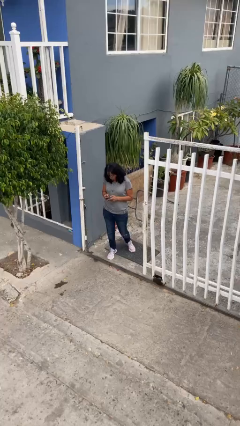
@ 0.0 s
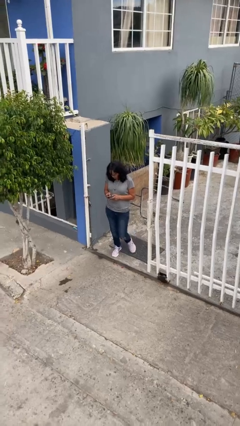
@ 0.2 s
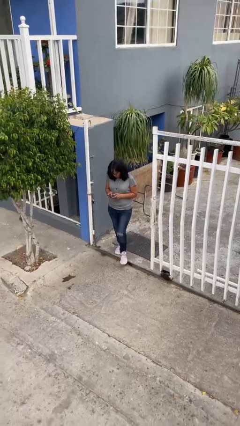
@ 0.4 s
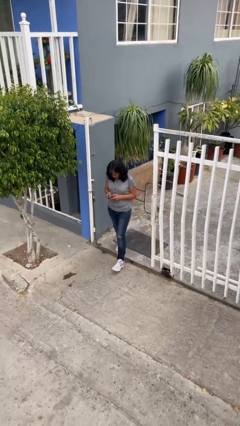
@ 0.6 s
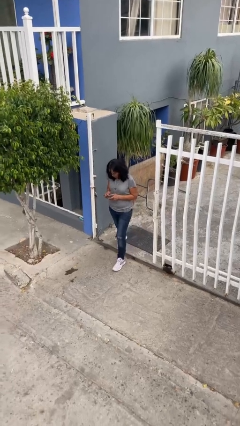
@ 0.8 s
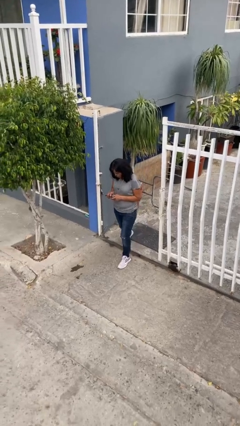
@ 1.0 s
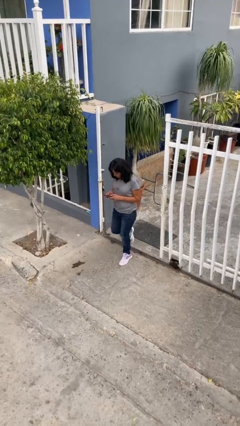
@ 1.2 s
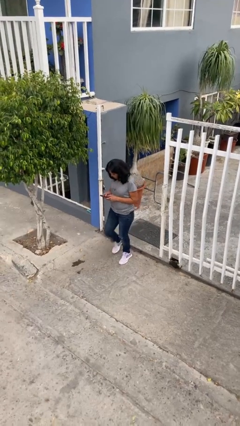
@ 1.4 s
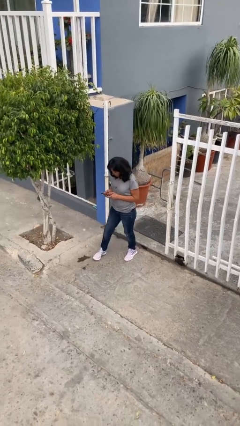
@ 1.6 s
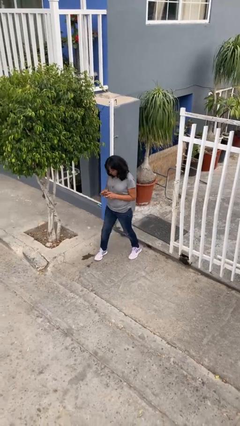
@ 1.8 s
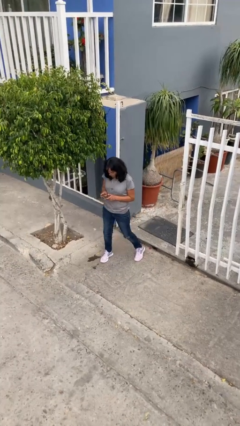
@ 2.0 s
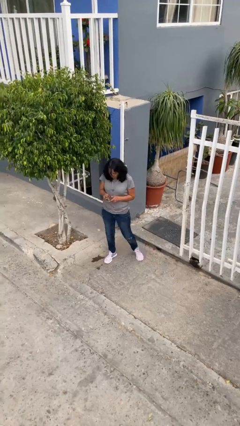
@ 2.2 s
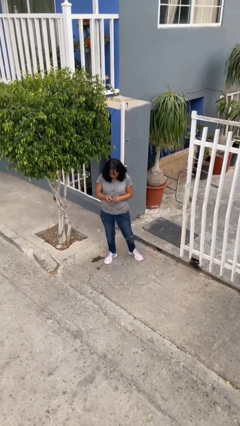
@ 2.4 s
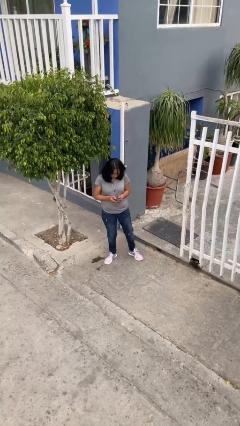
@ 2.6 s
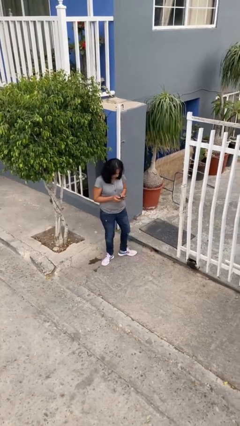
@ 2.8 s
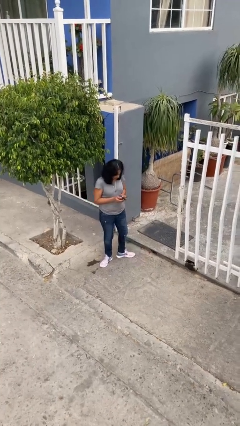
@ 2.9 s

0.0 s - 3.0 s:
person enters scene through structure

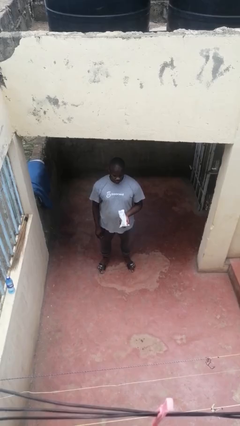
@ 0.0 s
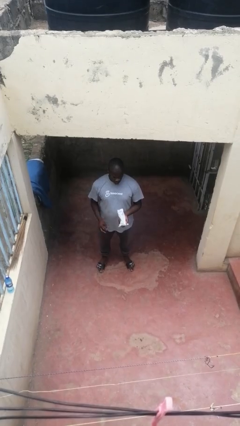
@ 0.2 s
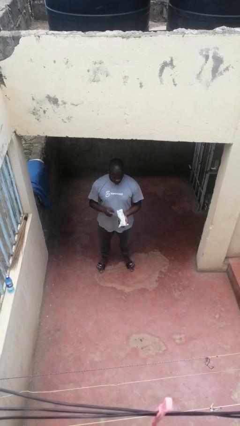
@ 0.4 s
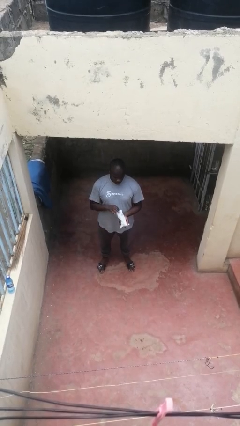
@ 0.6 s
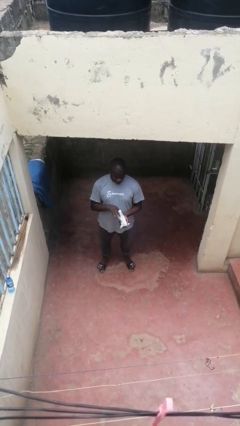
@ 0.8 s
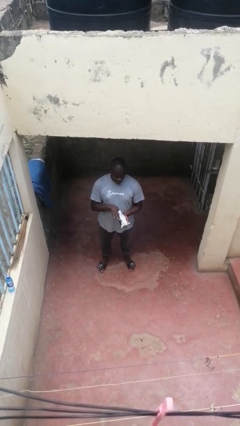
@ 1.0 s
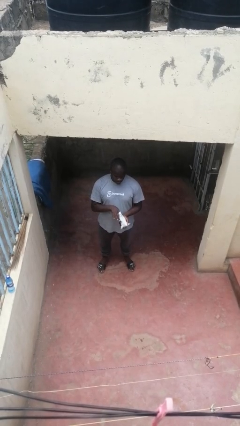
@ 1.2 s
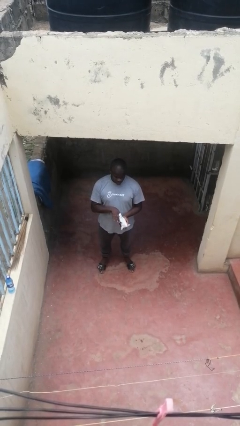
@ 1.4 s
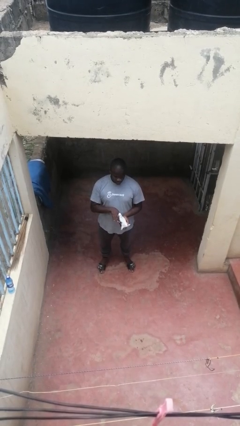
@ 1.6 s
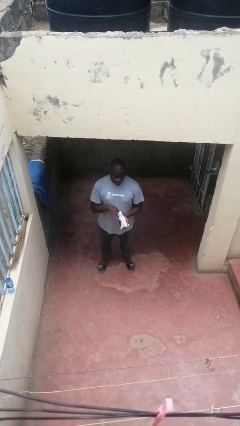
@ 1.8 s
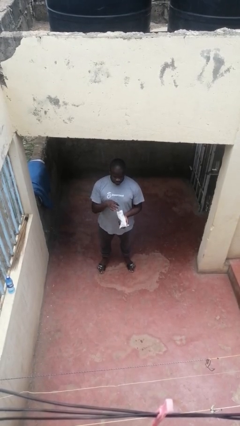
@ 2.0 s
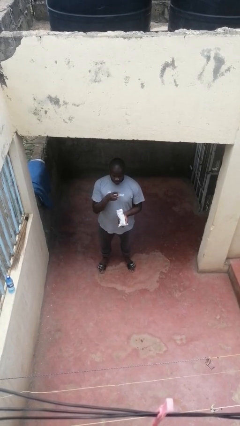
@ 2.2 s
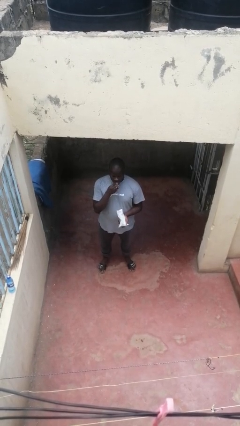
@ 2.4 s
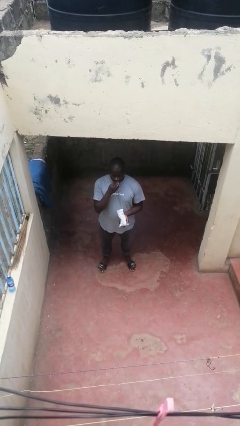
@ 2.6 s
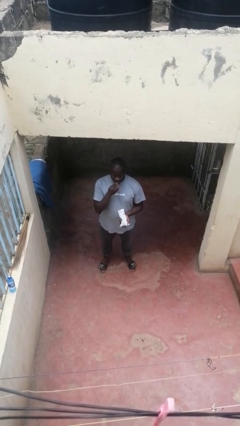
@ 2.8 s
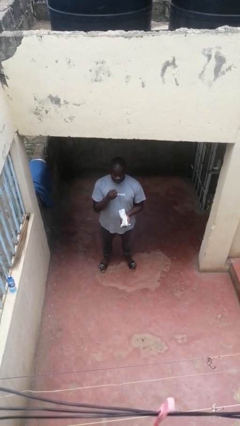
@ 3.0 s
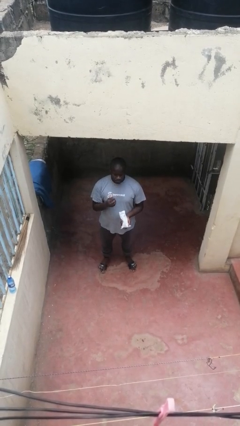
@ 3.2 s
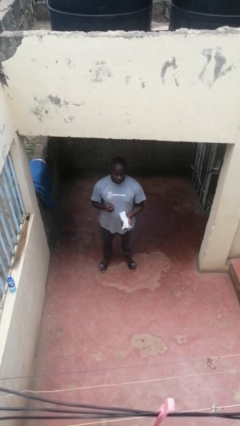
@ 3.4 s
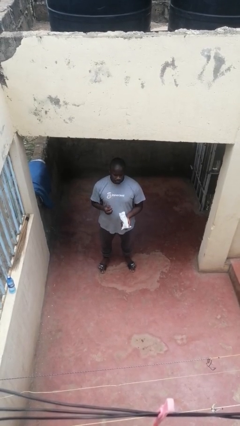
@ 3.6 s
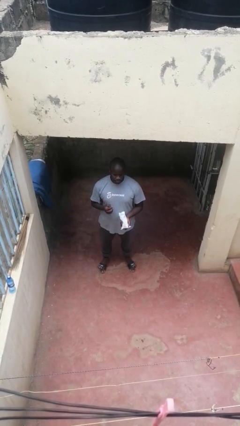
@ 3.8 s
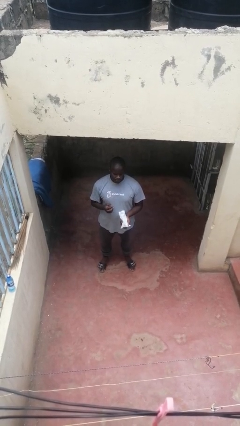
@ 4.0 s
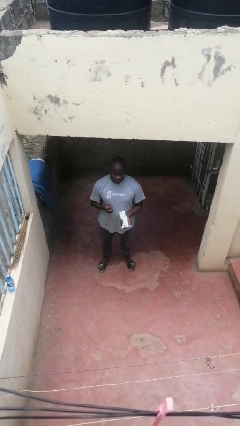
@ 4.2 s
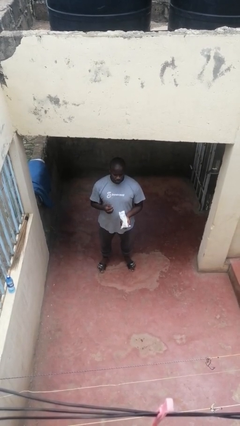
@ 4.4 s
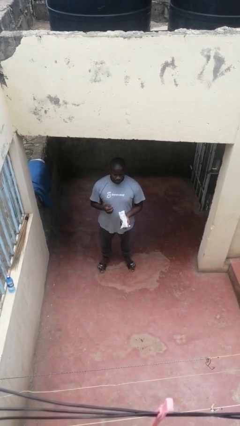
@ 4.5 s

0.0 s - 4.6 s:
person eats snack from bag

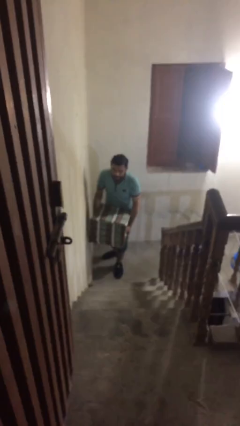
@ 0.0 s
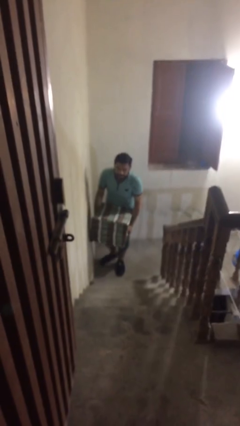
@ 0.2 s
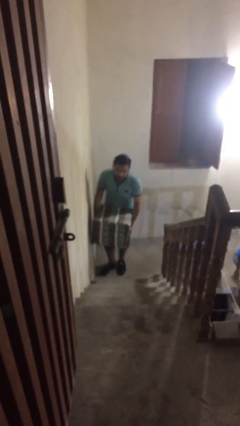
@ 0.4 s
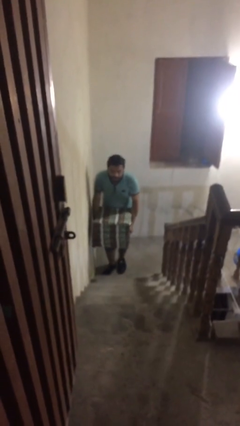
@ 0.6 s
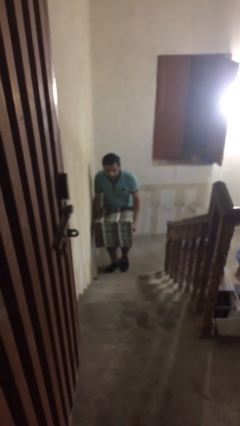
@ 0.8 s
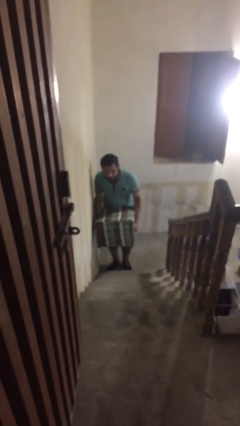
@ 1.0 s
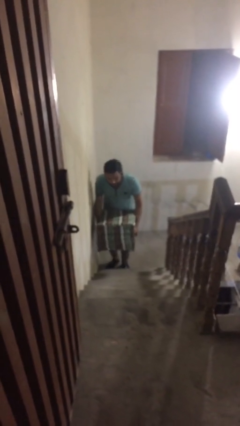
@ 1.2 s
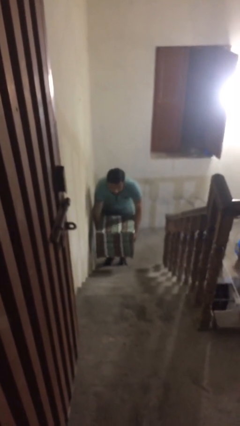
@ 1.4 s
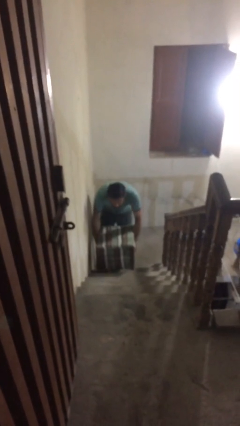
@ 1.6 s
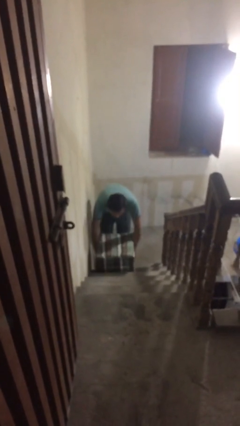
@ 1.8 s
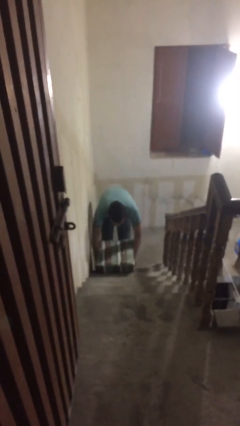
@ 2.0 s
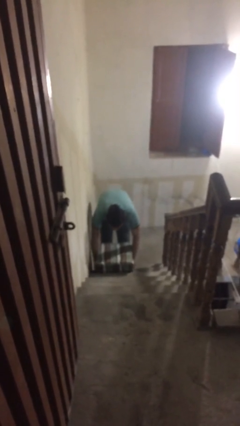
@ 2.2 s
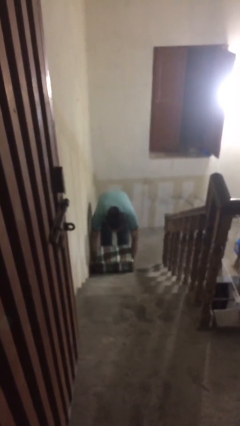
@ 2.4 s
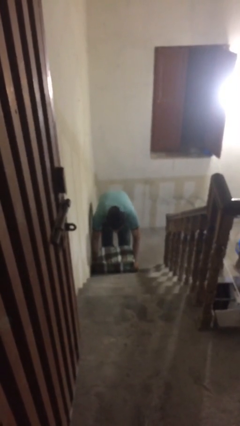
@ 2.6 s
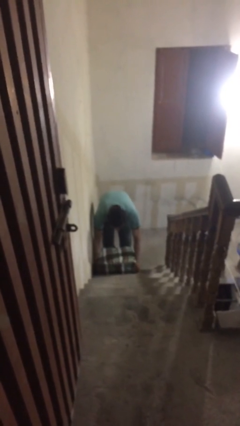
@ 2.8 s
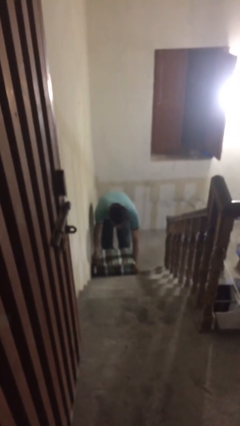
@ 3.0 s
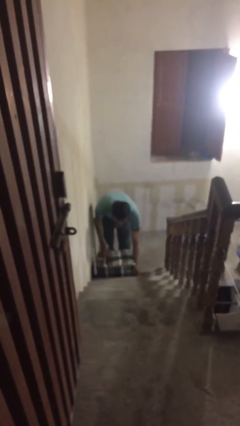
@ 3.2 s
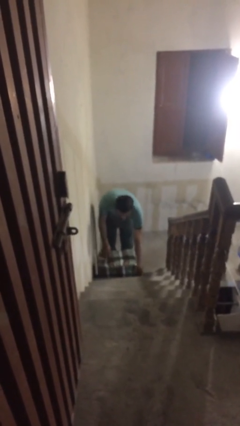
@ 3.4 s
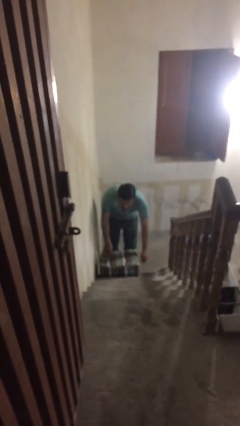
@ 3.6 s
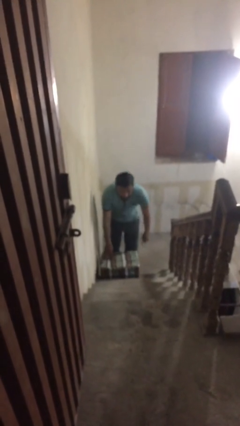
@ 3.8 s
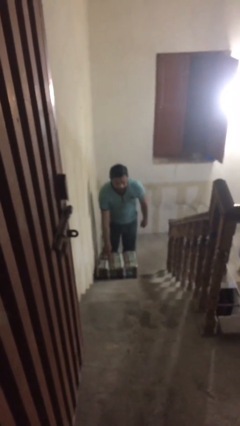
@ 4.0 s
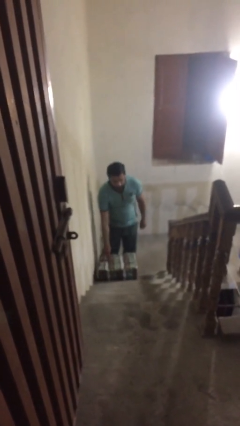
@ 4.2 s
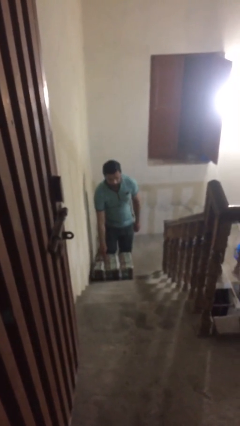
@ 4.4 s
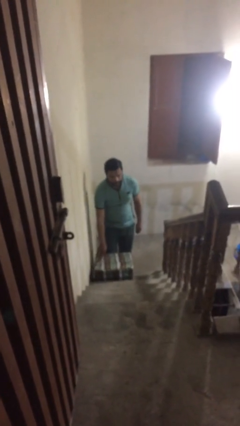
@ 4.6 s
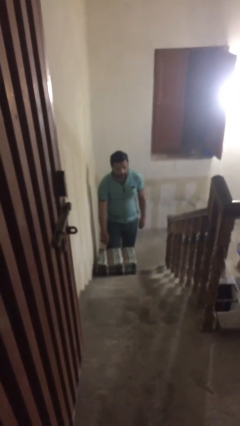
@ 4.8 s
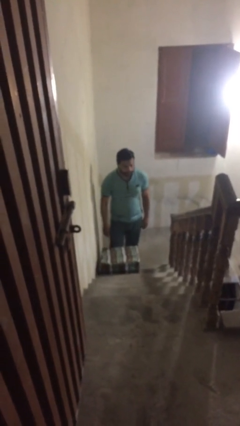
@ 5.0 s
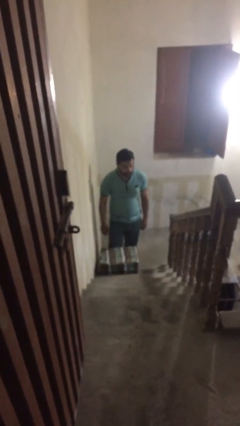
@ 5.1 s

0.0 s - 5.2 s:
person puts down object on floor

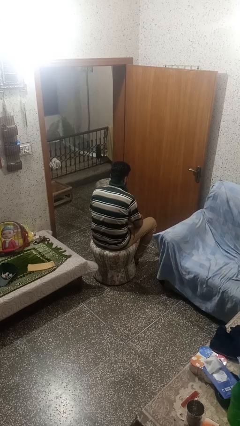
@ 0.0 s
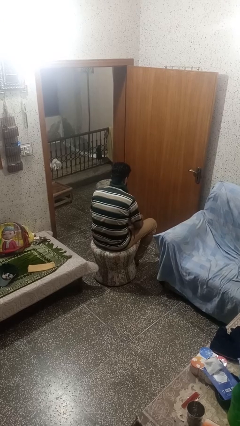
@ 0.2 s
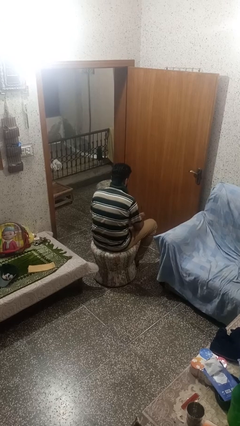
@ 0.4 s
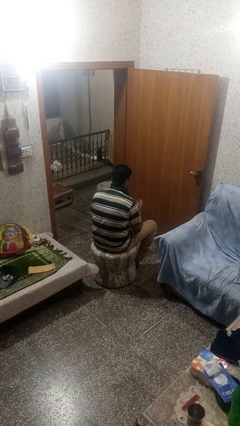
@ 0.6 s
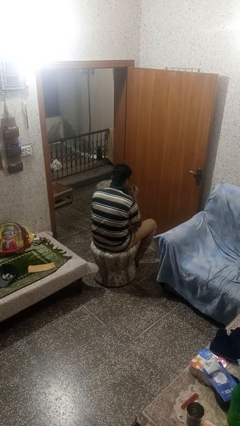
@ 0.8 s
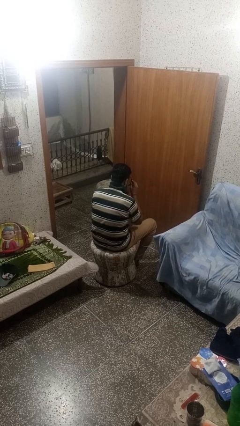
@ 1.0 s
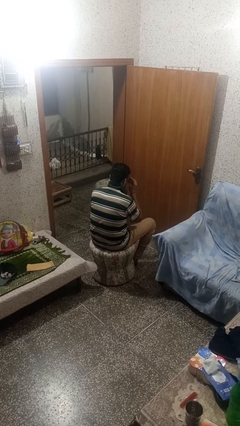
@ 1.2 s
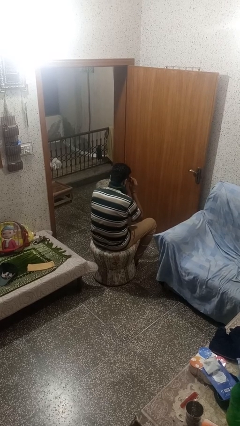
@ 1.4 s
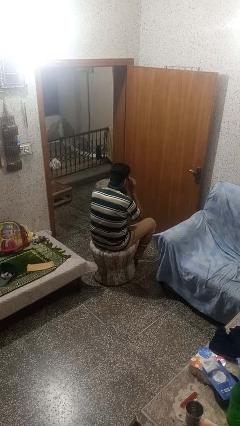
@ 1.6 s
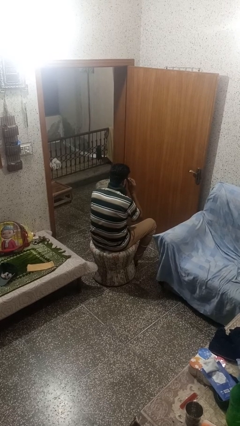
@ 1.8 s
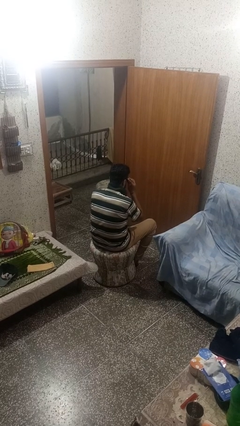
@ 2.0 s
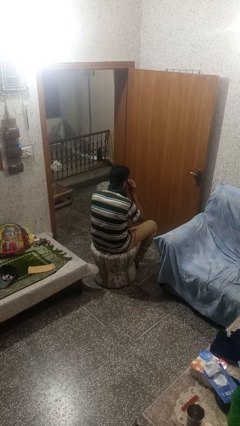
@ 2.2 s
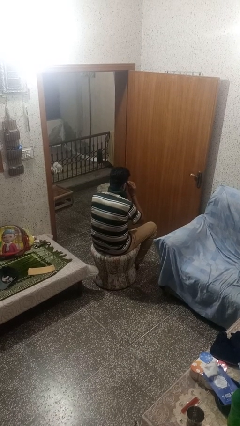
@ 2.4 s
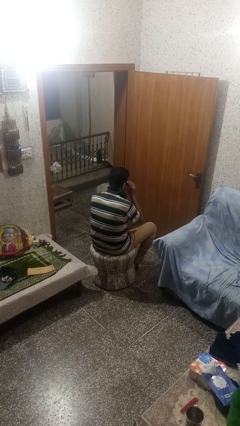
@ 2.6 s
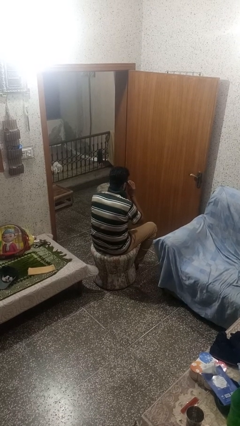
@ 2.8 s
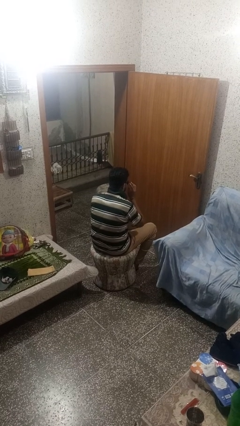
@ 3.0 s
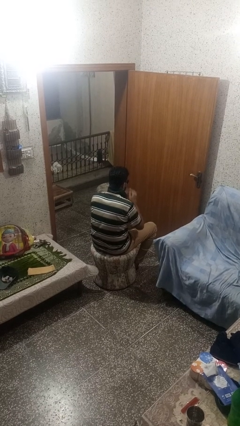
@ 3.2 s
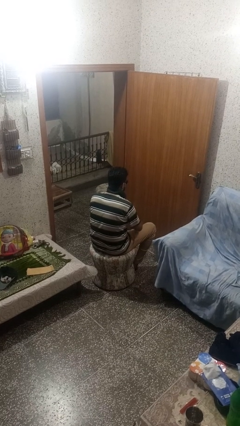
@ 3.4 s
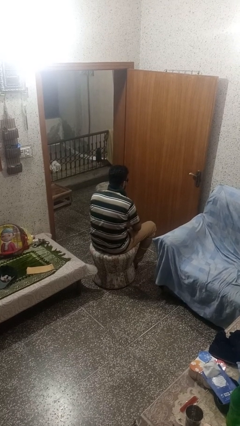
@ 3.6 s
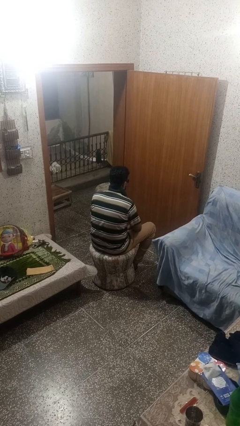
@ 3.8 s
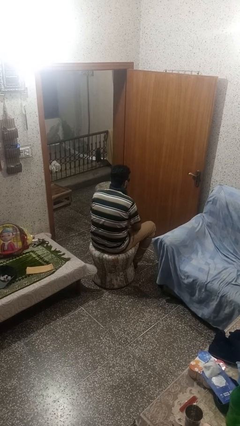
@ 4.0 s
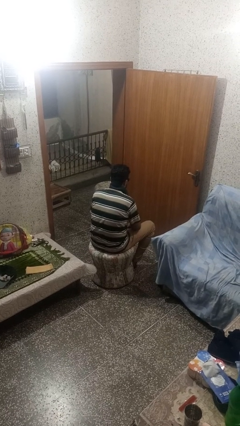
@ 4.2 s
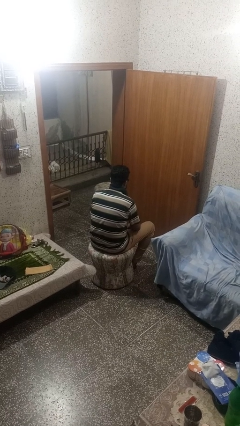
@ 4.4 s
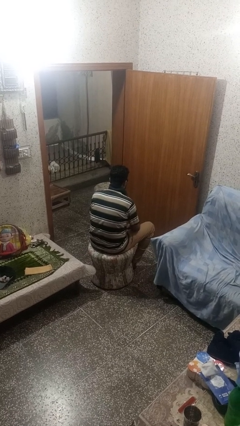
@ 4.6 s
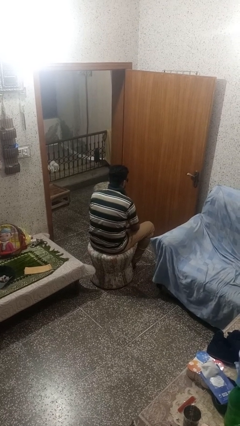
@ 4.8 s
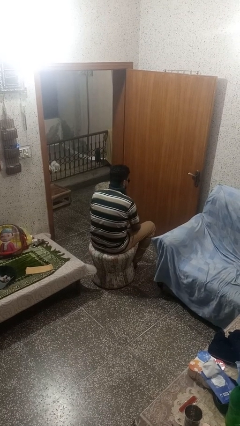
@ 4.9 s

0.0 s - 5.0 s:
person puts on glasses
